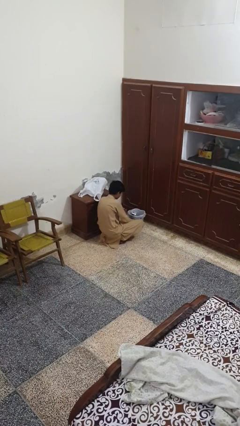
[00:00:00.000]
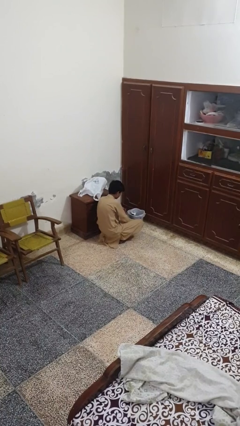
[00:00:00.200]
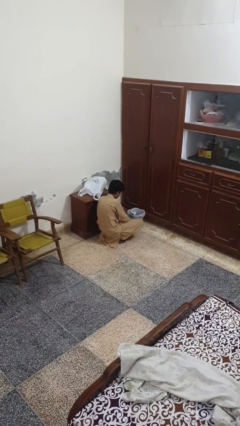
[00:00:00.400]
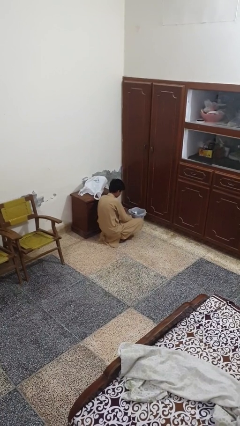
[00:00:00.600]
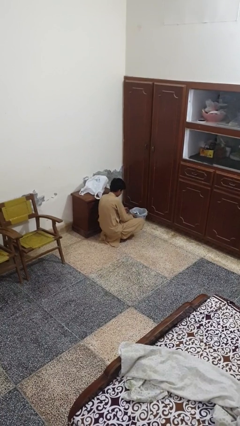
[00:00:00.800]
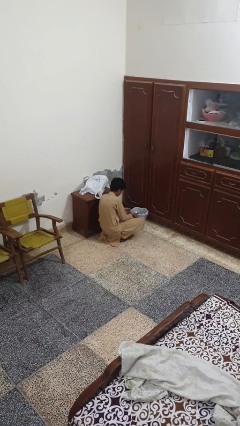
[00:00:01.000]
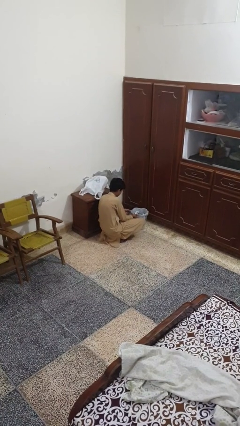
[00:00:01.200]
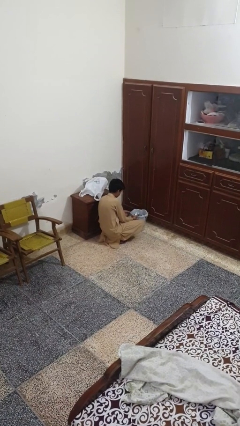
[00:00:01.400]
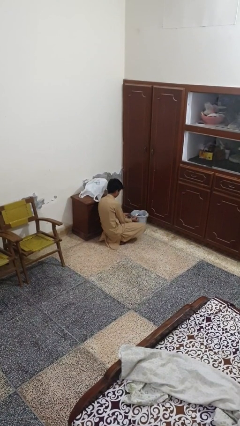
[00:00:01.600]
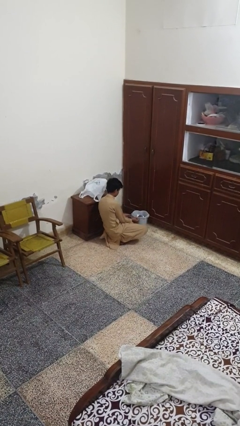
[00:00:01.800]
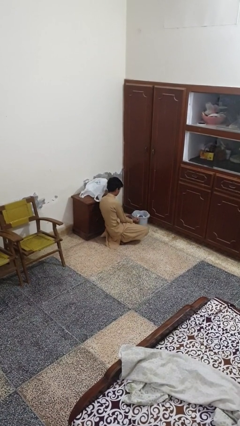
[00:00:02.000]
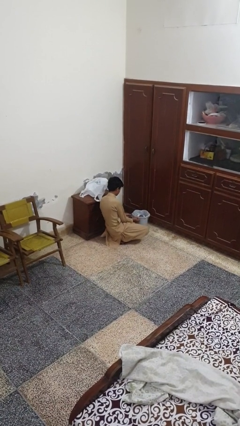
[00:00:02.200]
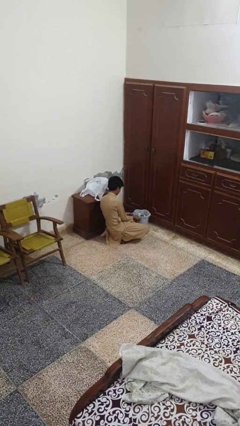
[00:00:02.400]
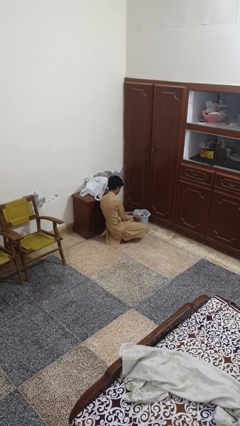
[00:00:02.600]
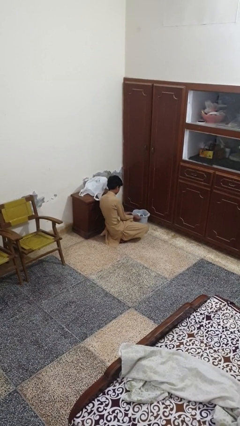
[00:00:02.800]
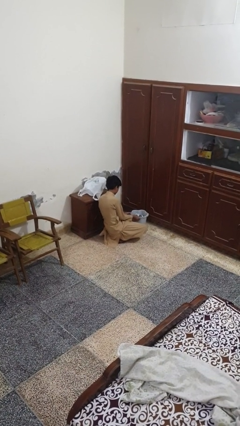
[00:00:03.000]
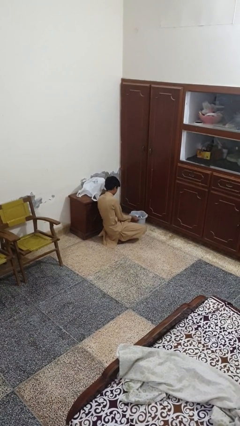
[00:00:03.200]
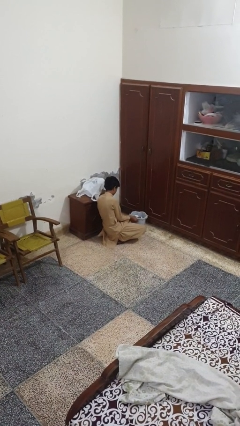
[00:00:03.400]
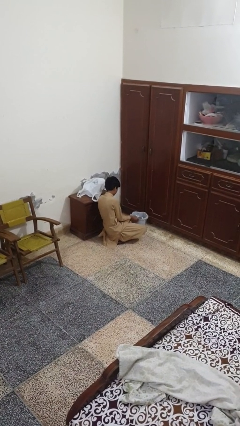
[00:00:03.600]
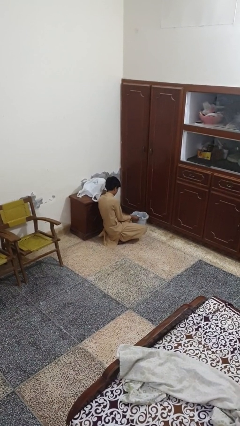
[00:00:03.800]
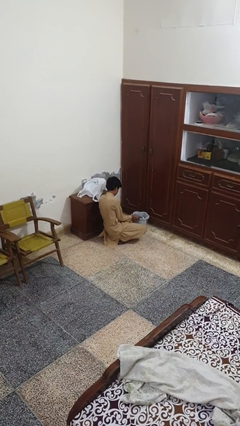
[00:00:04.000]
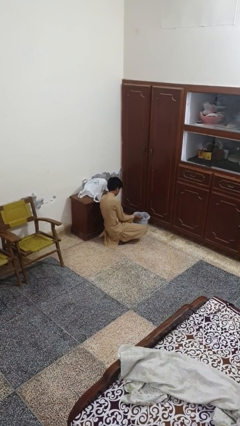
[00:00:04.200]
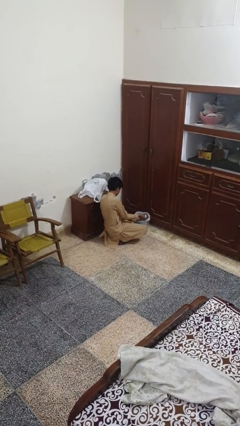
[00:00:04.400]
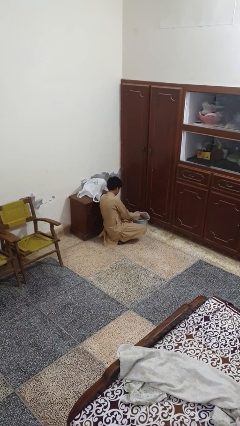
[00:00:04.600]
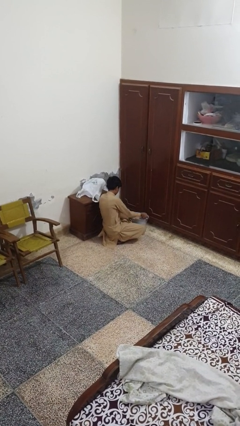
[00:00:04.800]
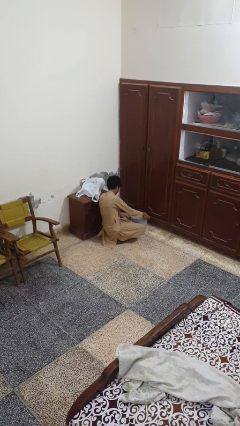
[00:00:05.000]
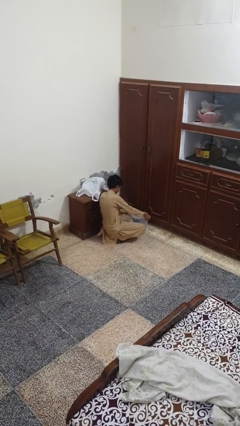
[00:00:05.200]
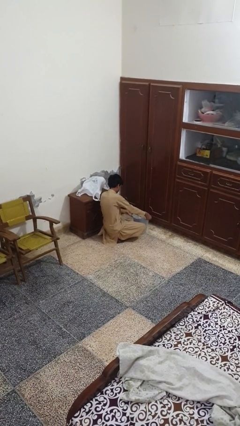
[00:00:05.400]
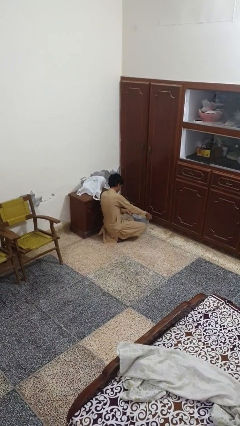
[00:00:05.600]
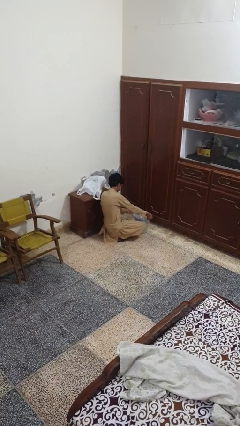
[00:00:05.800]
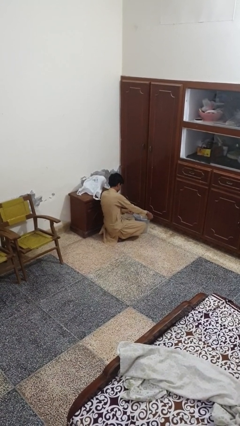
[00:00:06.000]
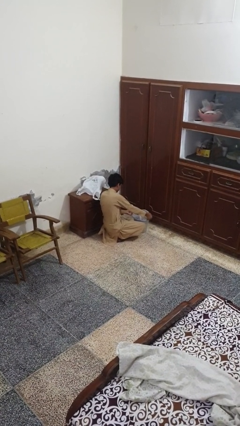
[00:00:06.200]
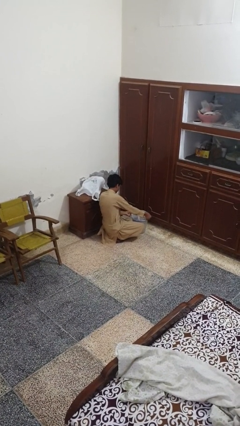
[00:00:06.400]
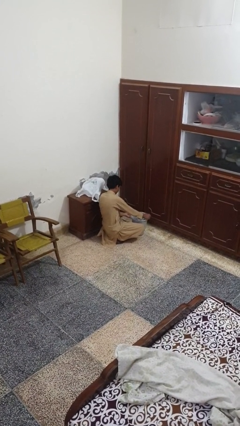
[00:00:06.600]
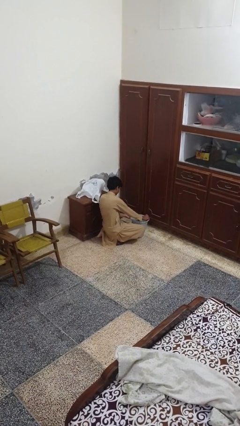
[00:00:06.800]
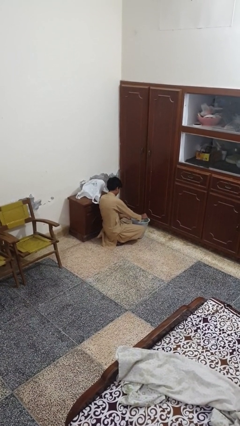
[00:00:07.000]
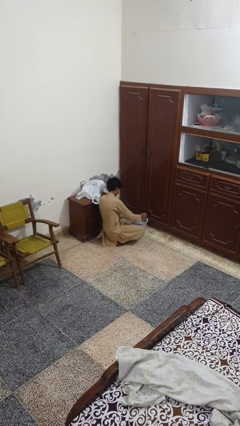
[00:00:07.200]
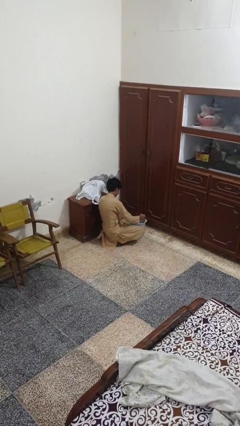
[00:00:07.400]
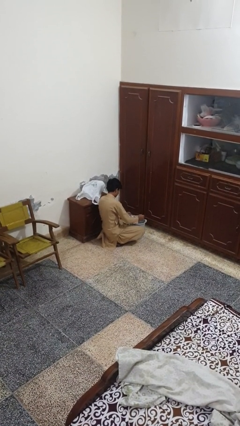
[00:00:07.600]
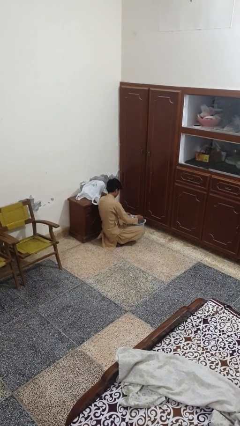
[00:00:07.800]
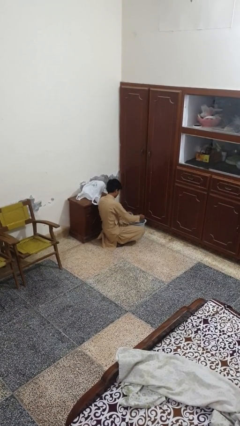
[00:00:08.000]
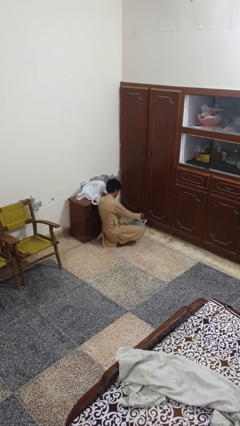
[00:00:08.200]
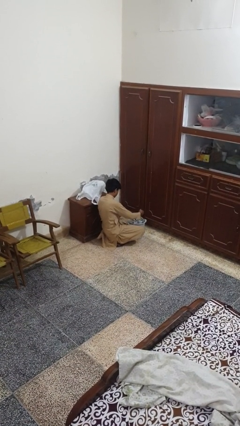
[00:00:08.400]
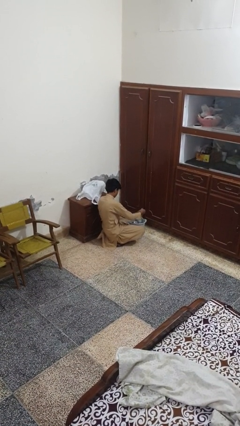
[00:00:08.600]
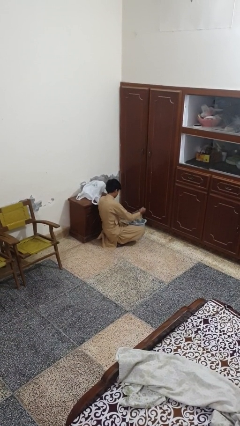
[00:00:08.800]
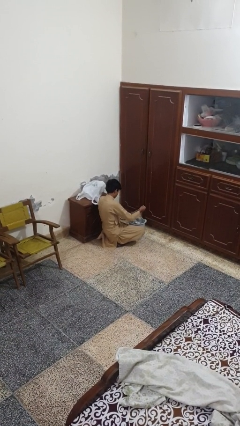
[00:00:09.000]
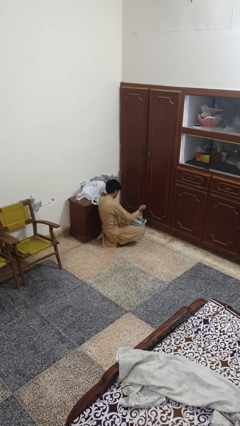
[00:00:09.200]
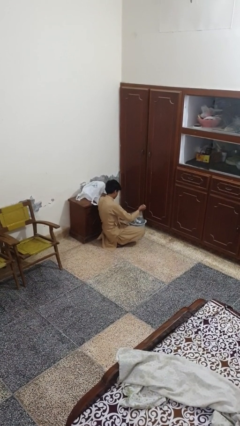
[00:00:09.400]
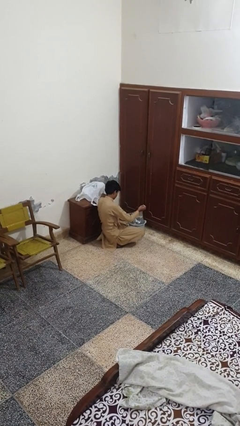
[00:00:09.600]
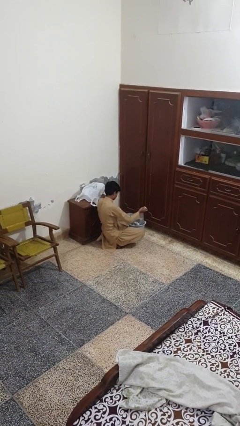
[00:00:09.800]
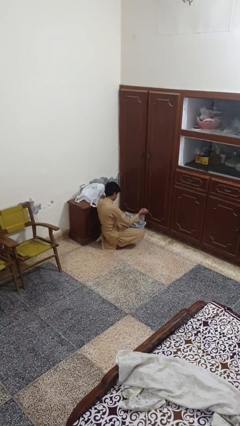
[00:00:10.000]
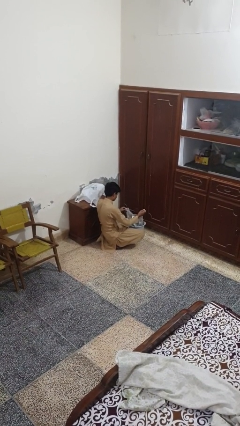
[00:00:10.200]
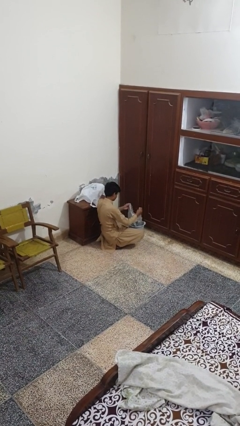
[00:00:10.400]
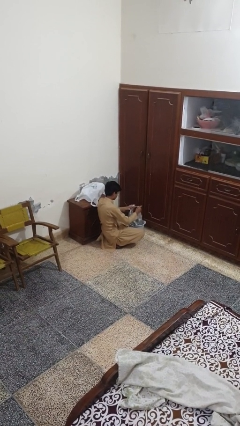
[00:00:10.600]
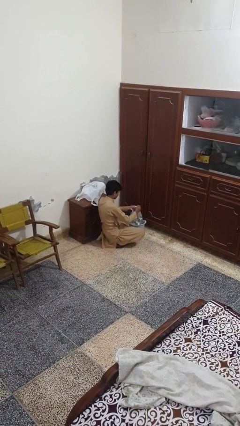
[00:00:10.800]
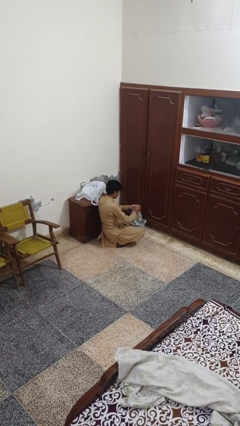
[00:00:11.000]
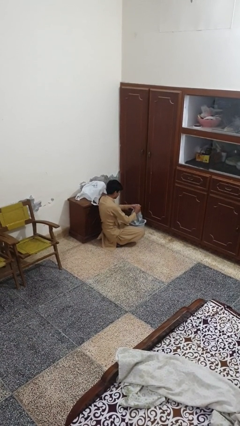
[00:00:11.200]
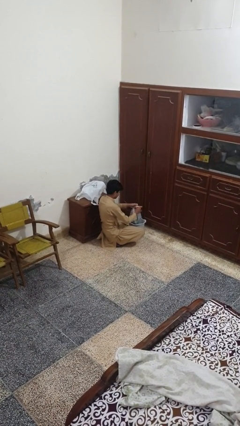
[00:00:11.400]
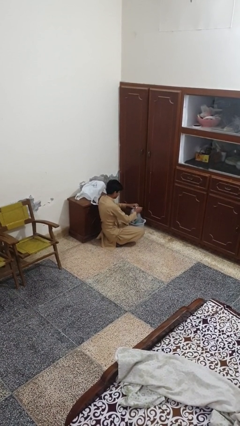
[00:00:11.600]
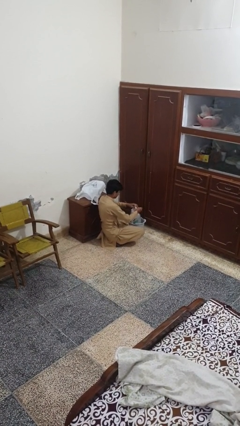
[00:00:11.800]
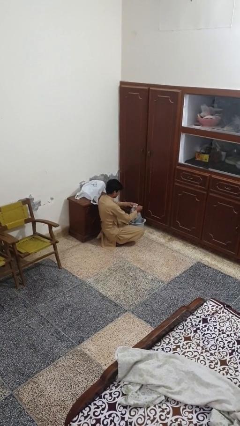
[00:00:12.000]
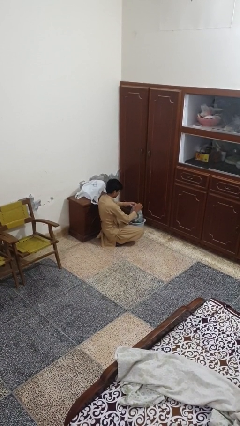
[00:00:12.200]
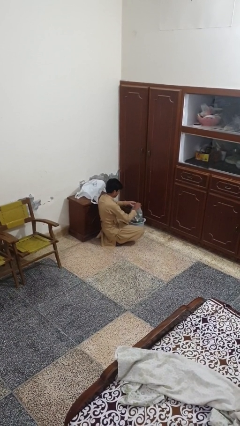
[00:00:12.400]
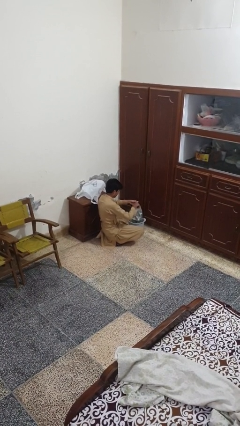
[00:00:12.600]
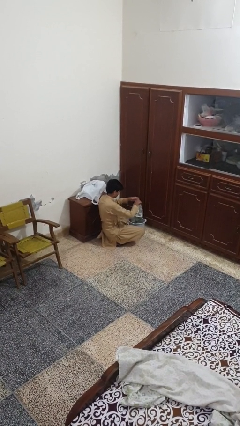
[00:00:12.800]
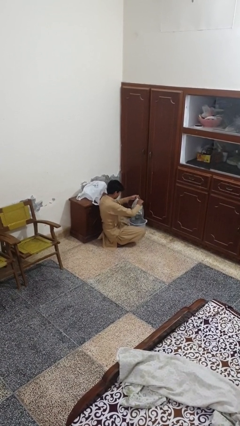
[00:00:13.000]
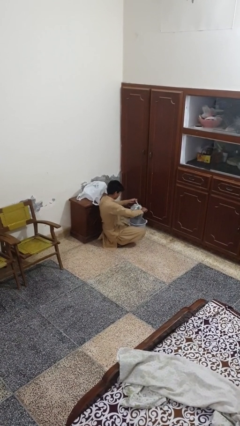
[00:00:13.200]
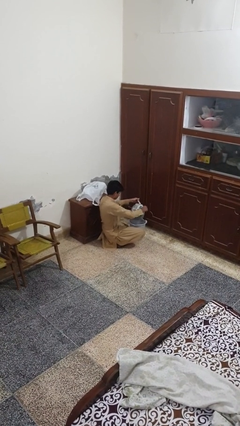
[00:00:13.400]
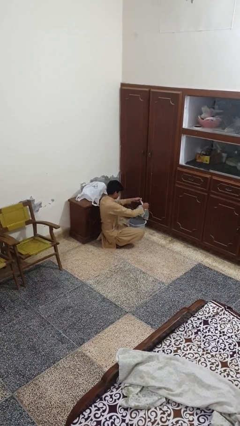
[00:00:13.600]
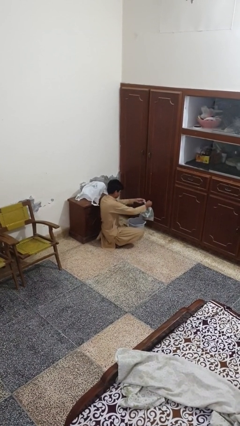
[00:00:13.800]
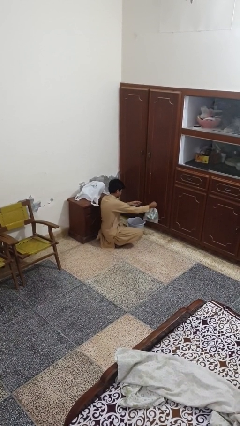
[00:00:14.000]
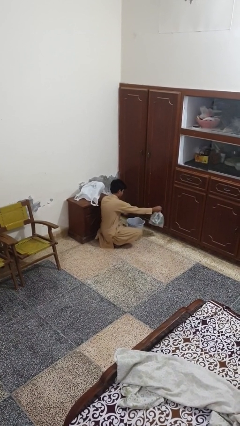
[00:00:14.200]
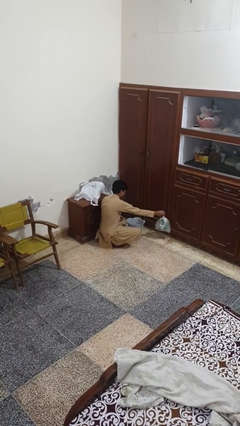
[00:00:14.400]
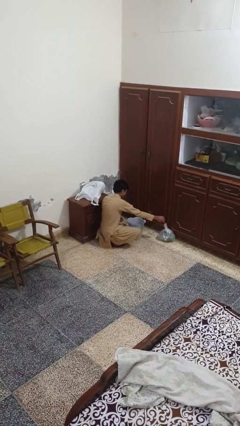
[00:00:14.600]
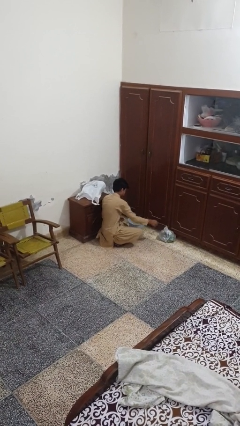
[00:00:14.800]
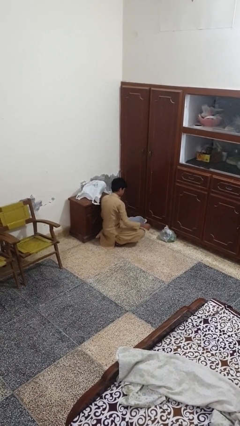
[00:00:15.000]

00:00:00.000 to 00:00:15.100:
person removes trashbag from trashcan

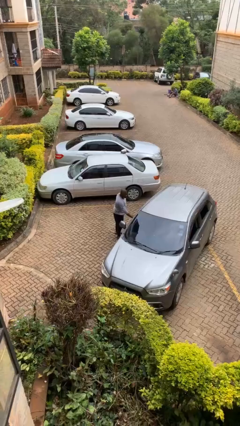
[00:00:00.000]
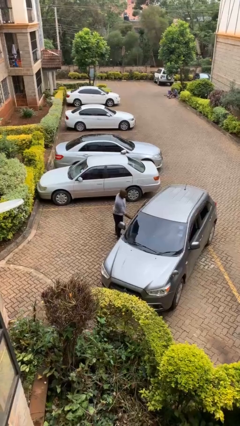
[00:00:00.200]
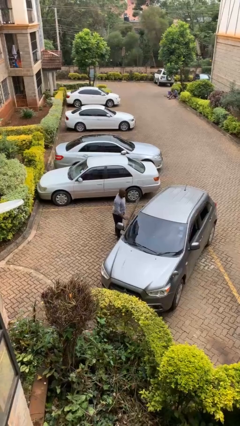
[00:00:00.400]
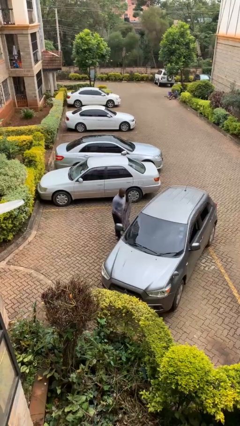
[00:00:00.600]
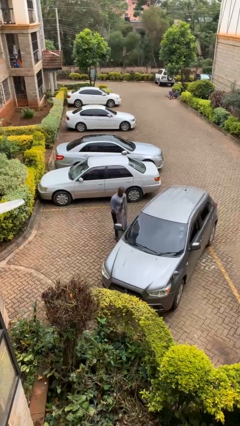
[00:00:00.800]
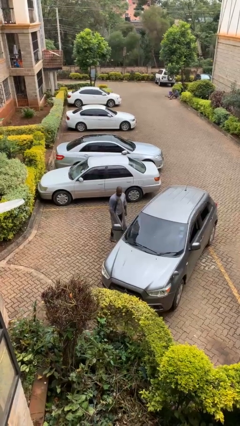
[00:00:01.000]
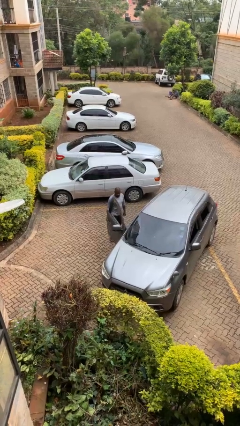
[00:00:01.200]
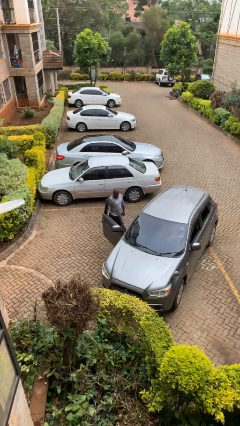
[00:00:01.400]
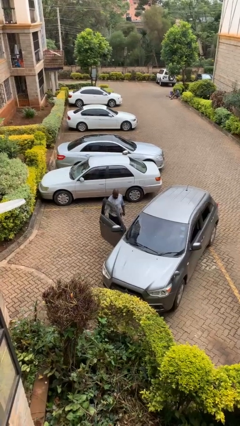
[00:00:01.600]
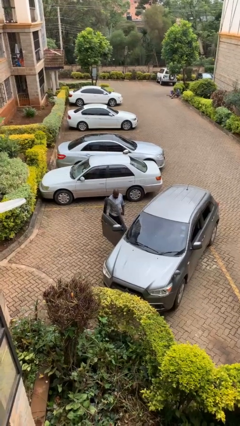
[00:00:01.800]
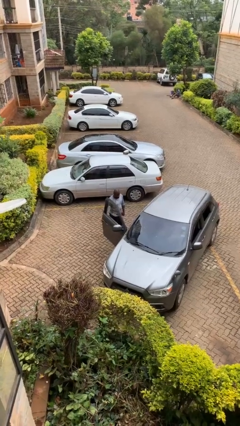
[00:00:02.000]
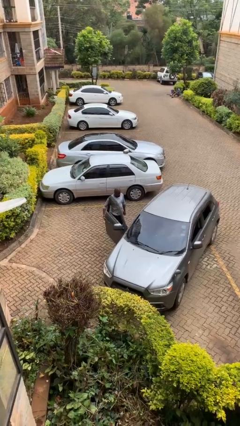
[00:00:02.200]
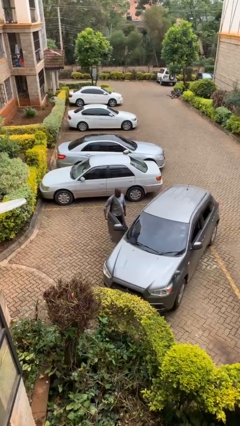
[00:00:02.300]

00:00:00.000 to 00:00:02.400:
person opens car door

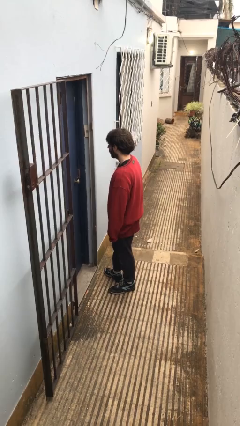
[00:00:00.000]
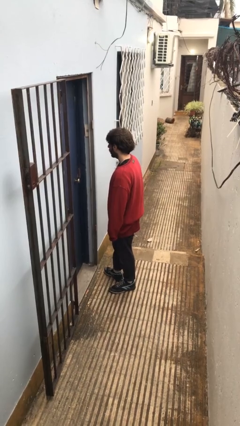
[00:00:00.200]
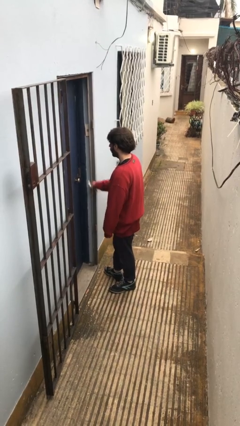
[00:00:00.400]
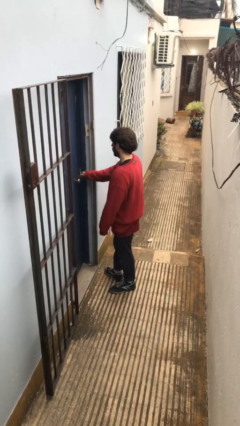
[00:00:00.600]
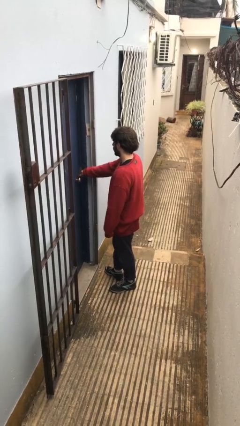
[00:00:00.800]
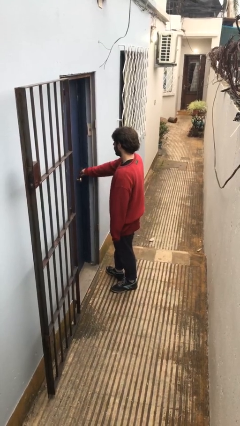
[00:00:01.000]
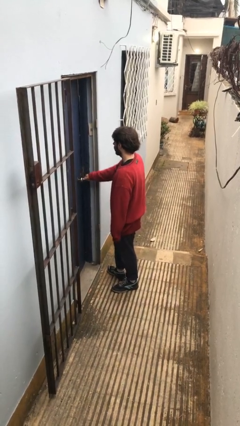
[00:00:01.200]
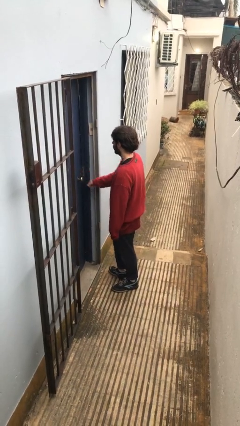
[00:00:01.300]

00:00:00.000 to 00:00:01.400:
person unlocks door with keys
